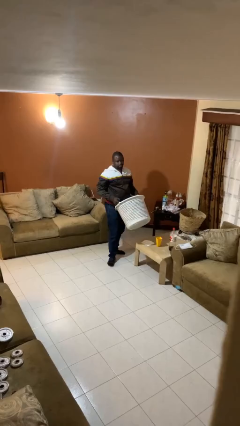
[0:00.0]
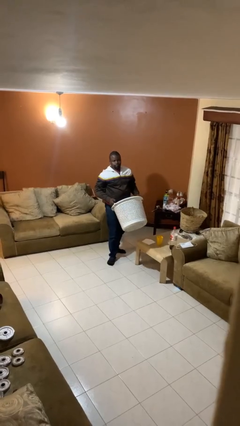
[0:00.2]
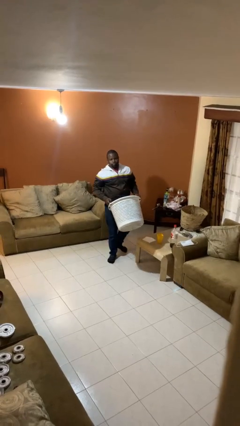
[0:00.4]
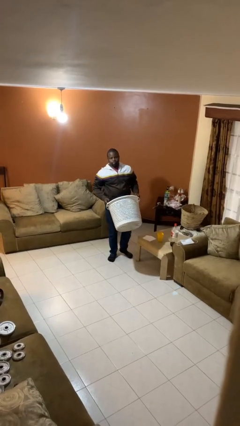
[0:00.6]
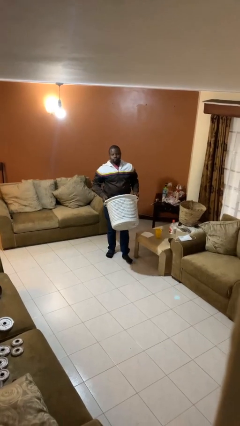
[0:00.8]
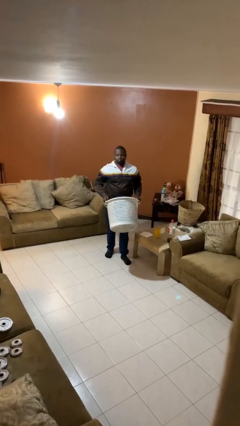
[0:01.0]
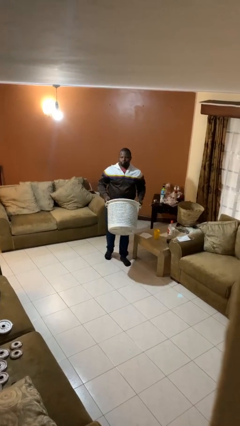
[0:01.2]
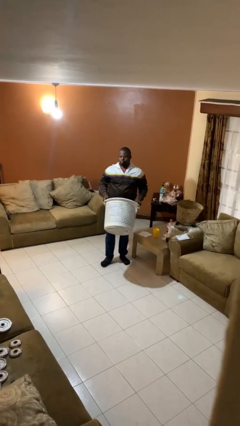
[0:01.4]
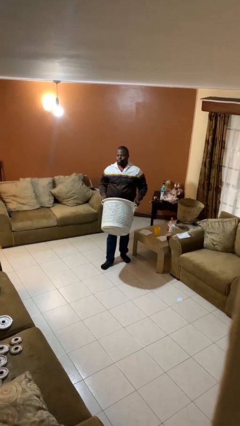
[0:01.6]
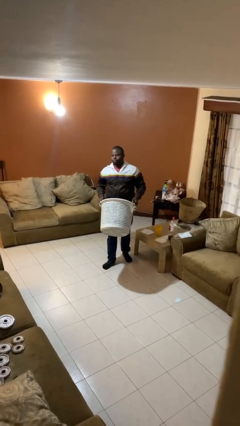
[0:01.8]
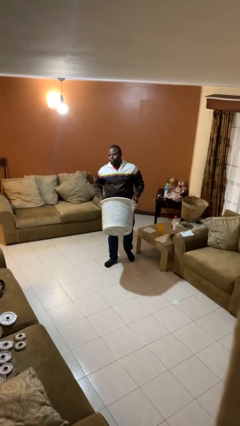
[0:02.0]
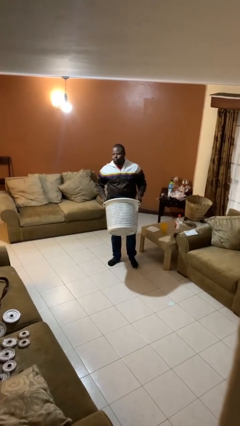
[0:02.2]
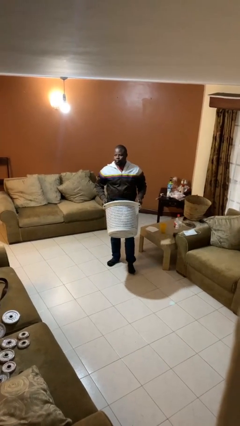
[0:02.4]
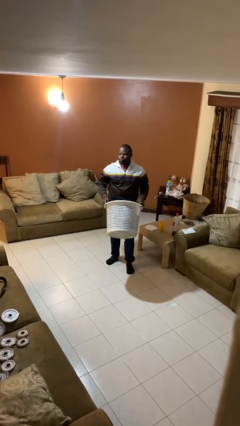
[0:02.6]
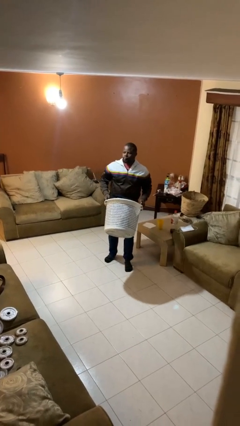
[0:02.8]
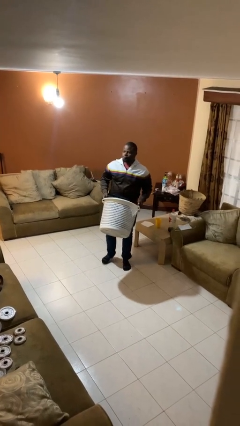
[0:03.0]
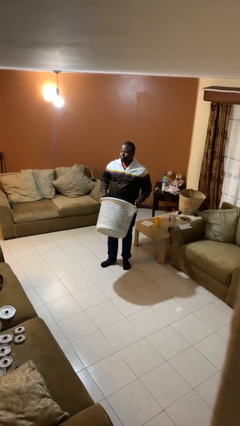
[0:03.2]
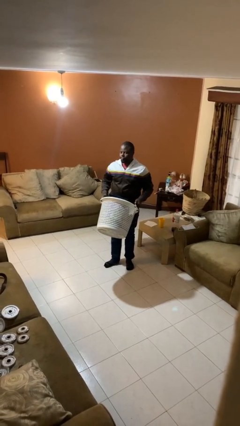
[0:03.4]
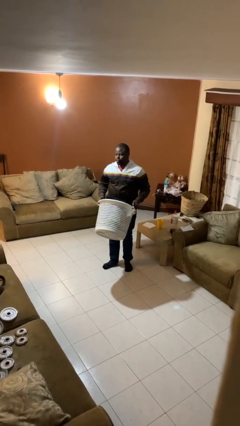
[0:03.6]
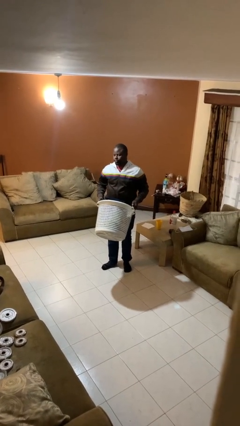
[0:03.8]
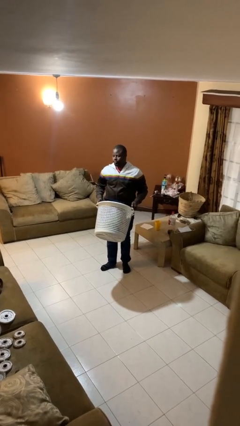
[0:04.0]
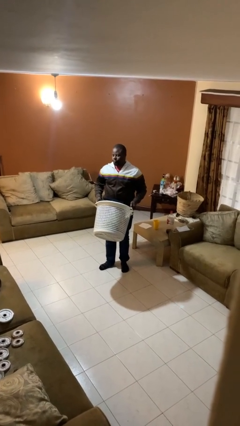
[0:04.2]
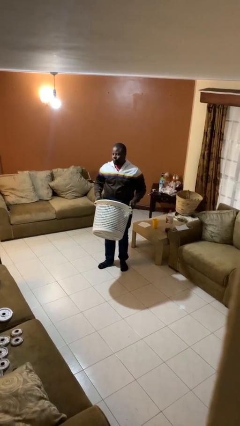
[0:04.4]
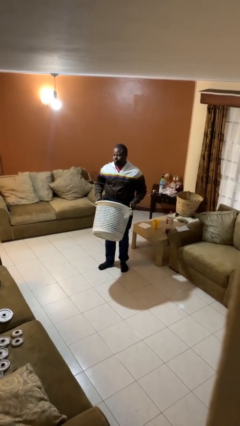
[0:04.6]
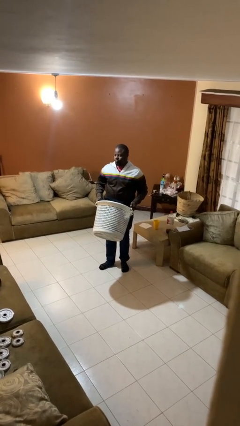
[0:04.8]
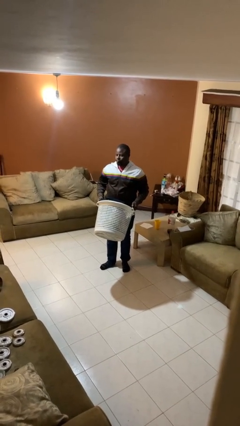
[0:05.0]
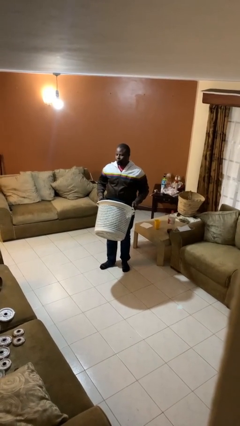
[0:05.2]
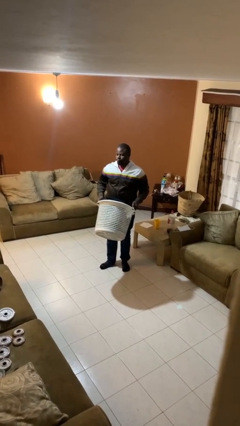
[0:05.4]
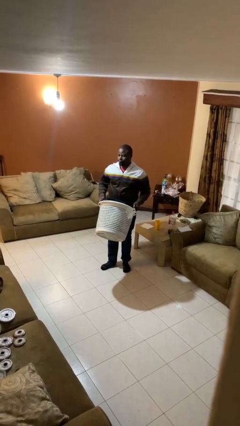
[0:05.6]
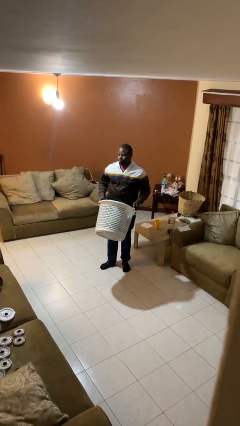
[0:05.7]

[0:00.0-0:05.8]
person carries laundry basket

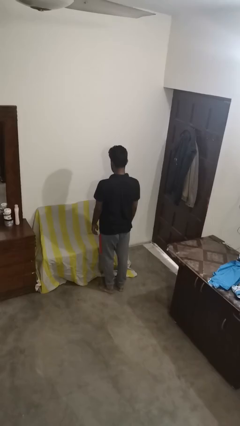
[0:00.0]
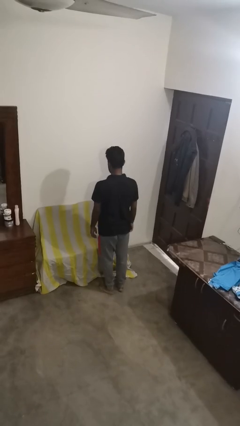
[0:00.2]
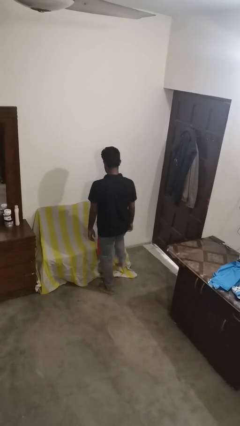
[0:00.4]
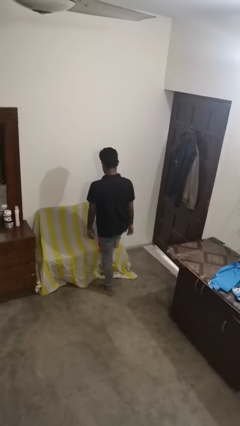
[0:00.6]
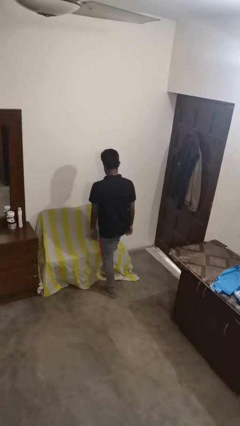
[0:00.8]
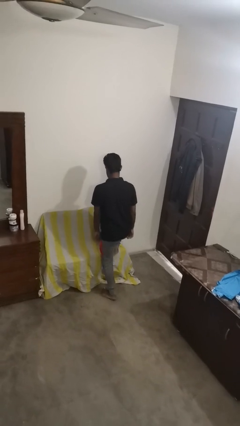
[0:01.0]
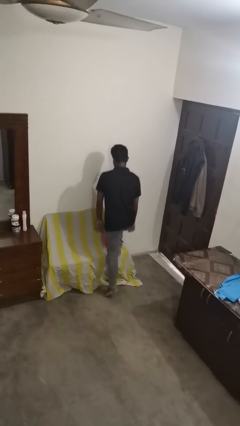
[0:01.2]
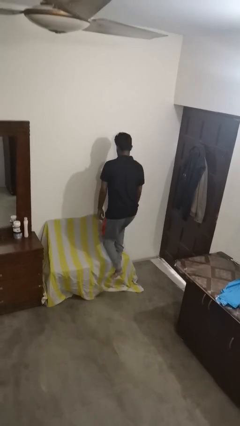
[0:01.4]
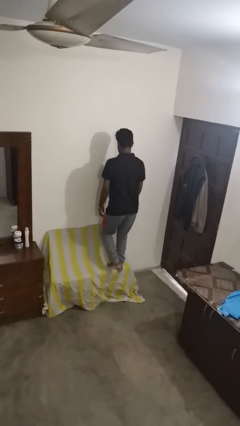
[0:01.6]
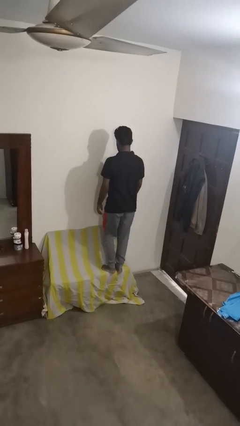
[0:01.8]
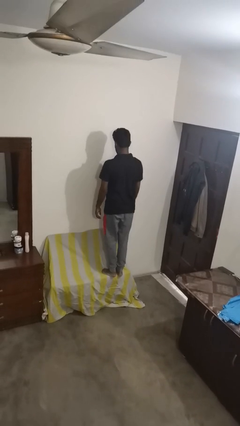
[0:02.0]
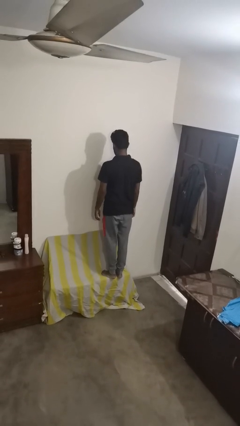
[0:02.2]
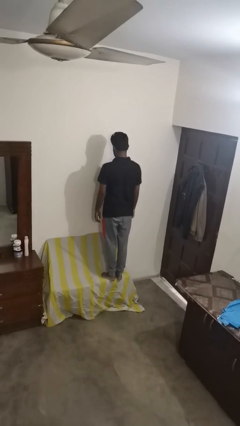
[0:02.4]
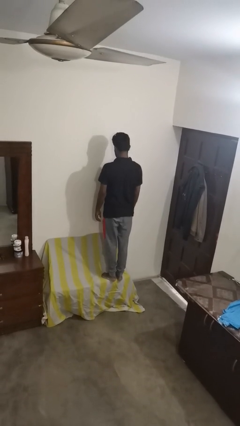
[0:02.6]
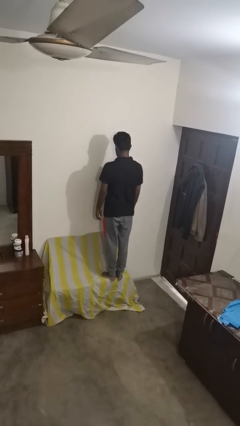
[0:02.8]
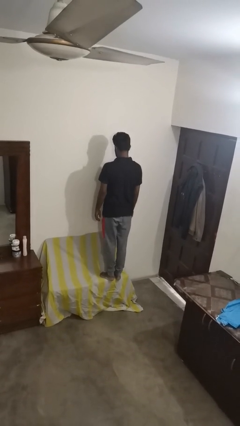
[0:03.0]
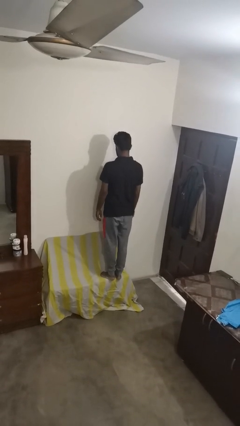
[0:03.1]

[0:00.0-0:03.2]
person climbs on couch

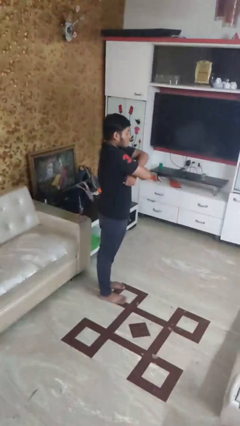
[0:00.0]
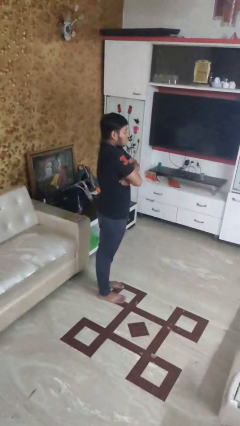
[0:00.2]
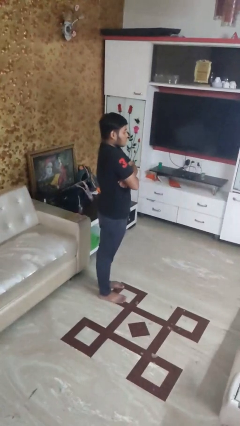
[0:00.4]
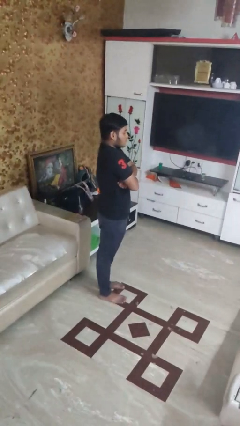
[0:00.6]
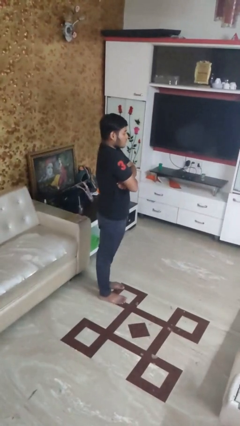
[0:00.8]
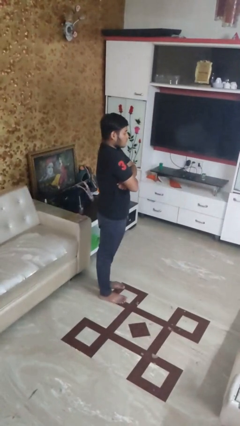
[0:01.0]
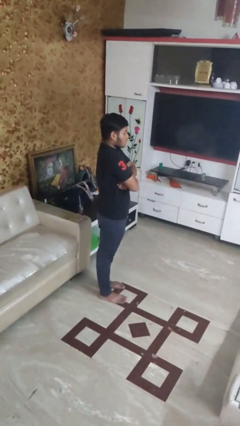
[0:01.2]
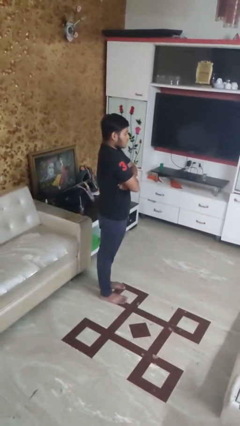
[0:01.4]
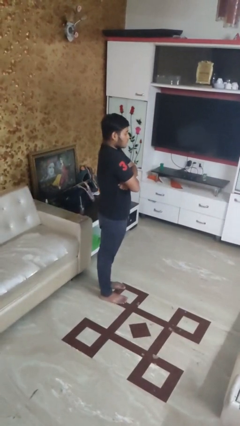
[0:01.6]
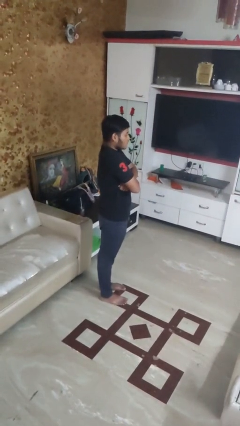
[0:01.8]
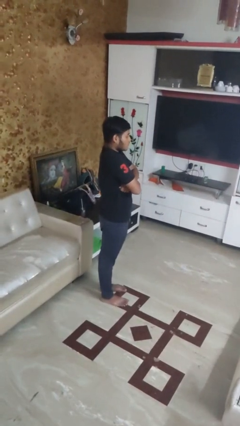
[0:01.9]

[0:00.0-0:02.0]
person crosses arms

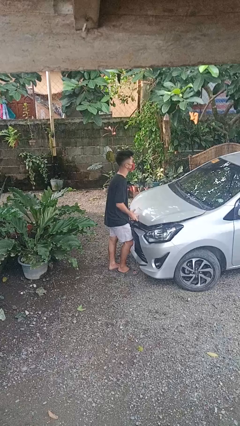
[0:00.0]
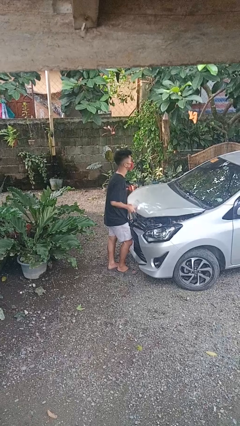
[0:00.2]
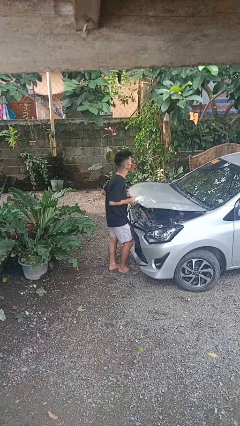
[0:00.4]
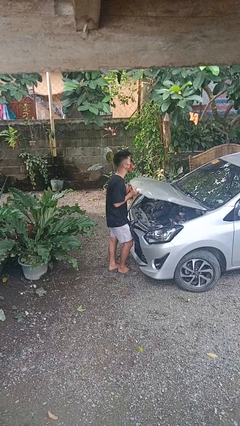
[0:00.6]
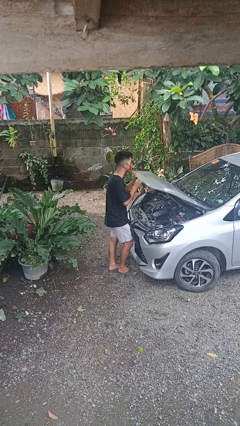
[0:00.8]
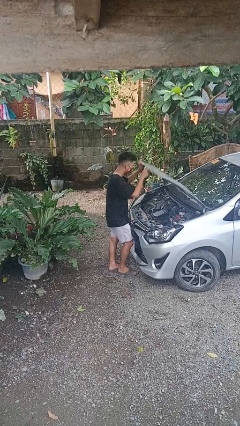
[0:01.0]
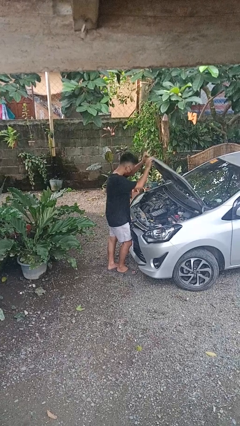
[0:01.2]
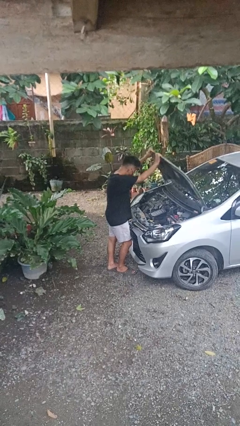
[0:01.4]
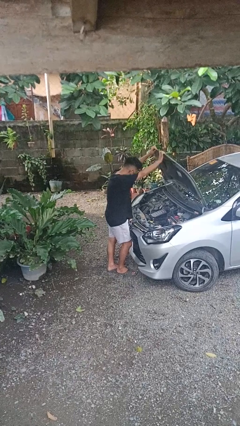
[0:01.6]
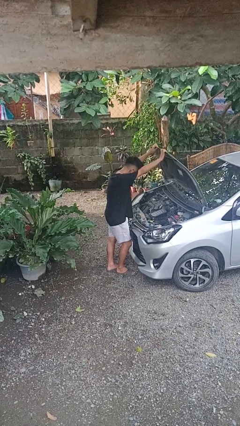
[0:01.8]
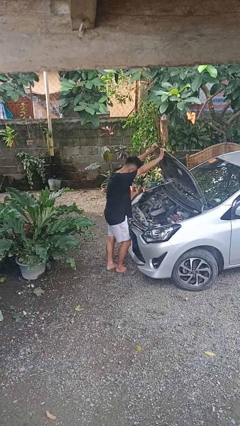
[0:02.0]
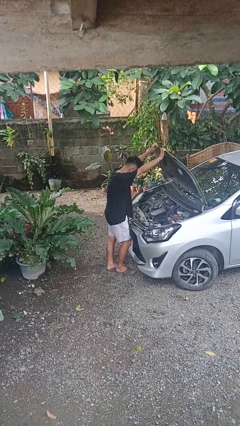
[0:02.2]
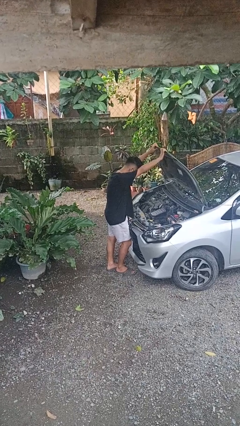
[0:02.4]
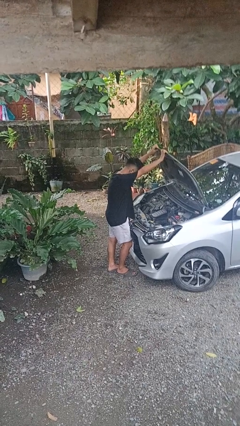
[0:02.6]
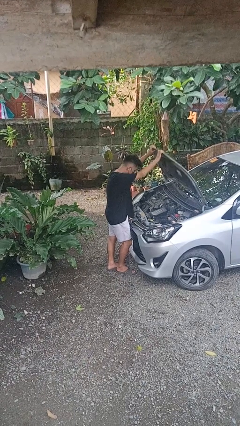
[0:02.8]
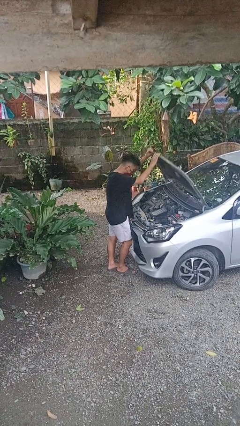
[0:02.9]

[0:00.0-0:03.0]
person opens car hood

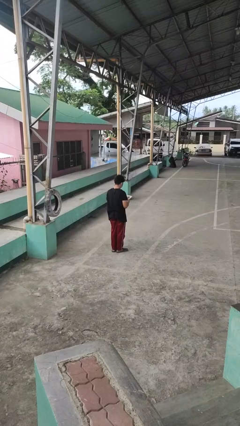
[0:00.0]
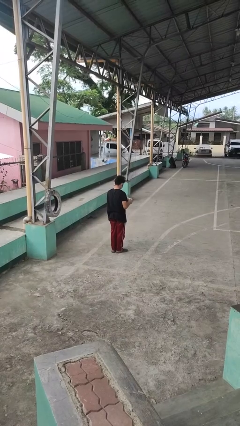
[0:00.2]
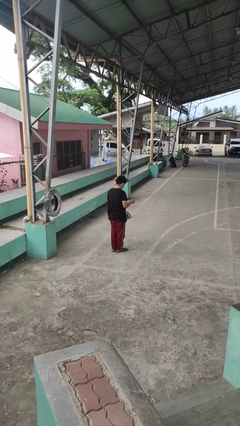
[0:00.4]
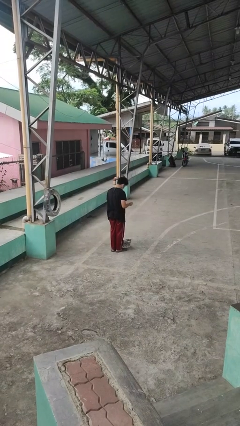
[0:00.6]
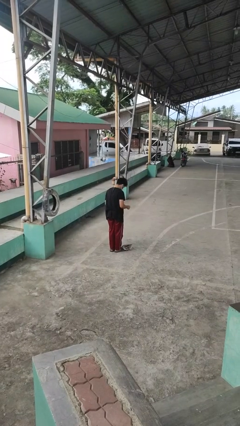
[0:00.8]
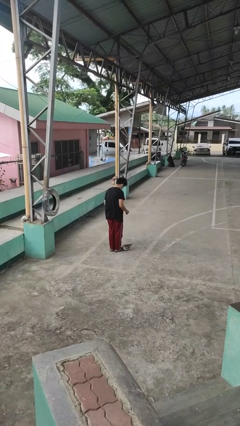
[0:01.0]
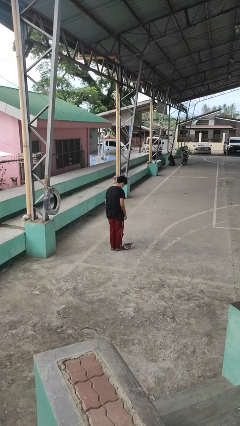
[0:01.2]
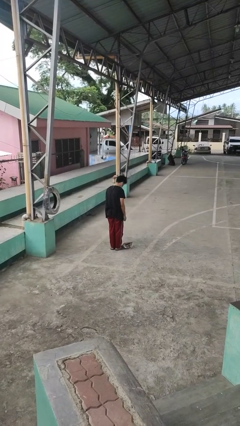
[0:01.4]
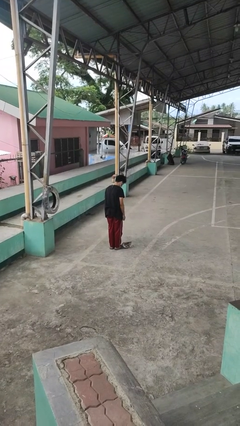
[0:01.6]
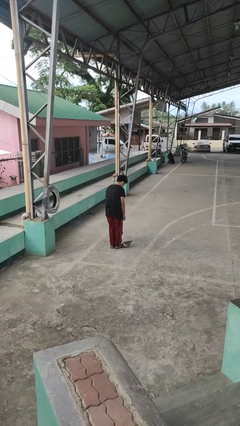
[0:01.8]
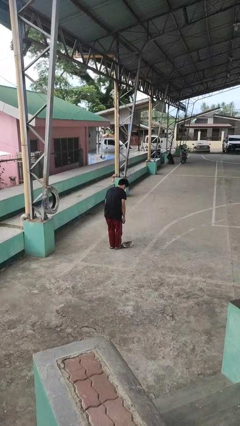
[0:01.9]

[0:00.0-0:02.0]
person drops object

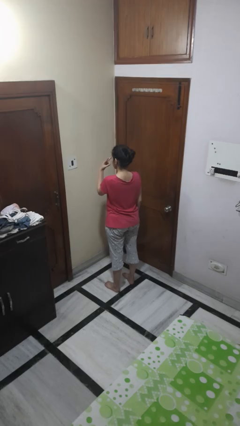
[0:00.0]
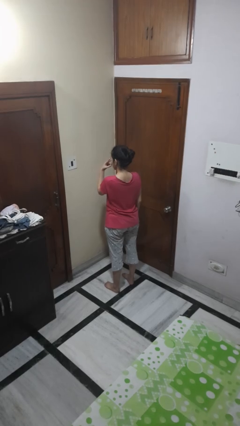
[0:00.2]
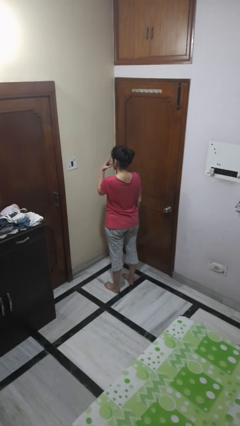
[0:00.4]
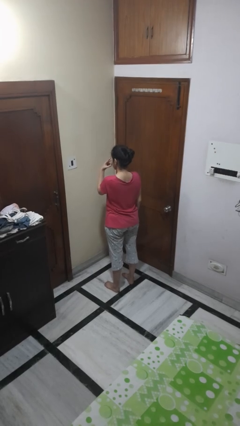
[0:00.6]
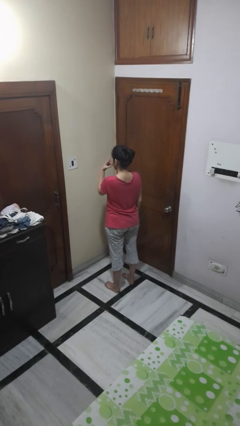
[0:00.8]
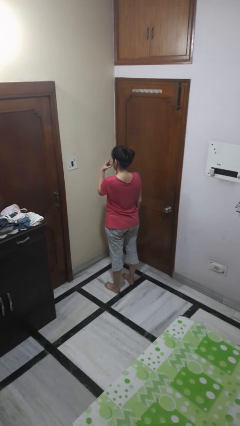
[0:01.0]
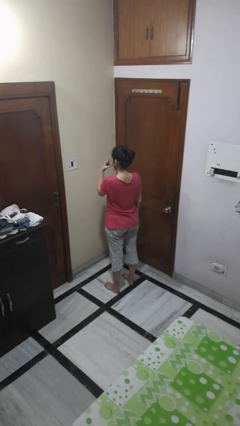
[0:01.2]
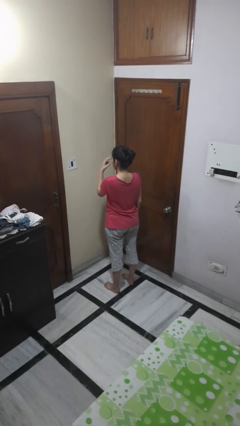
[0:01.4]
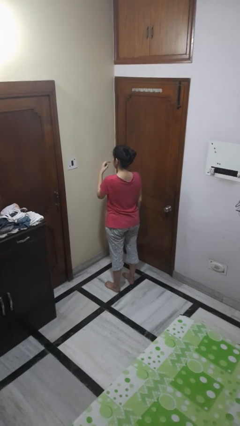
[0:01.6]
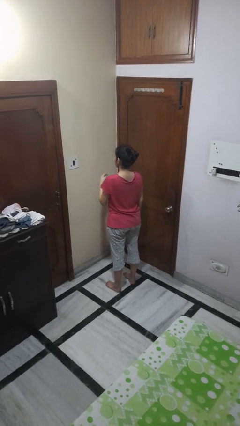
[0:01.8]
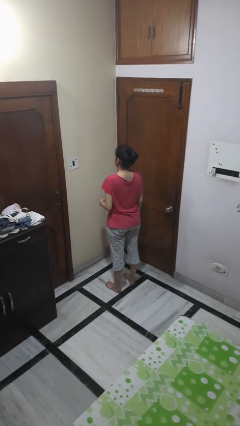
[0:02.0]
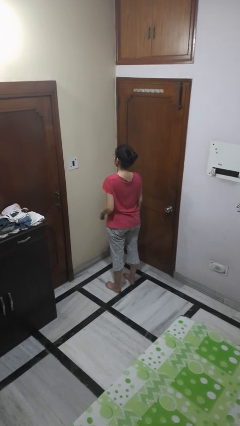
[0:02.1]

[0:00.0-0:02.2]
person gestures watch closely
